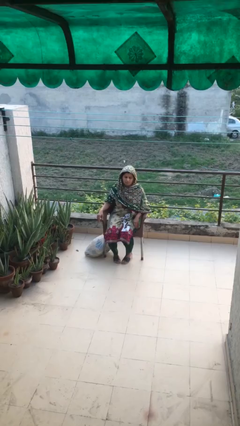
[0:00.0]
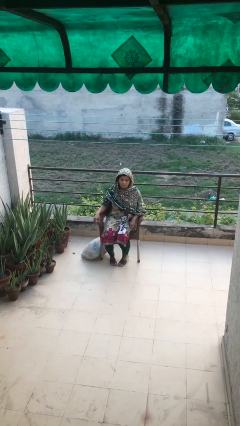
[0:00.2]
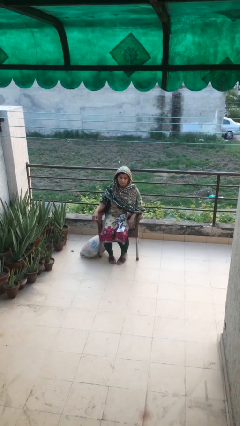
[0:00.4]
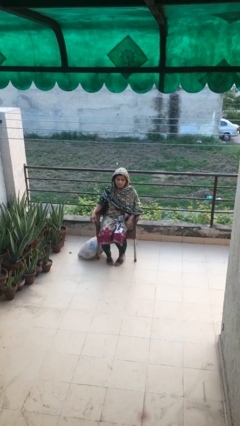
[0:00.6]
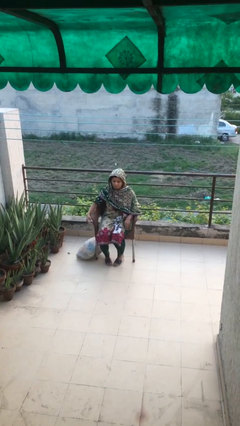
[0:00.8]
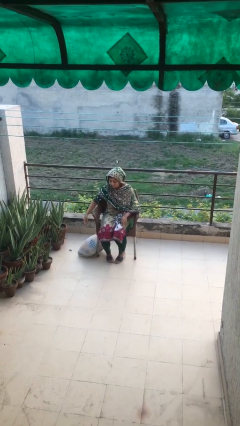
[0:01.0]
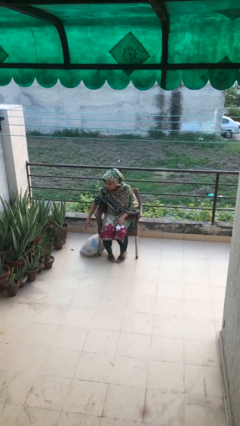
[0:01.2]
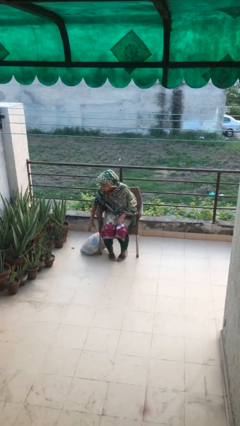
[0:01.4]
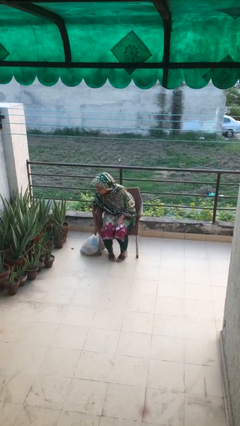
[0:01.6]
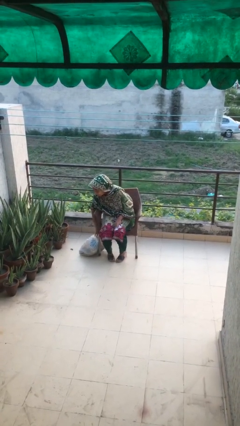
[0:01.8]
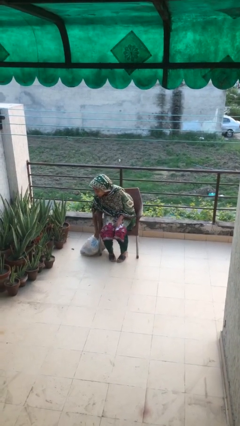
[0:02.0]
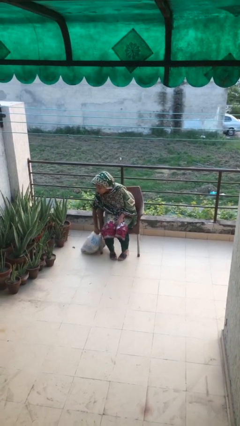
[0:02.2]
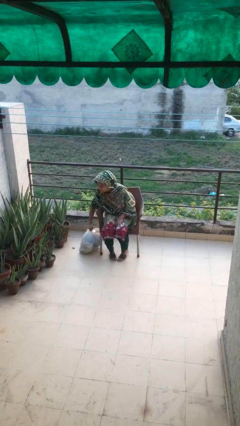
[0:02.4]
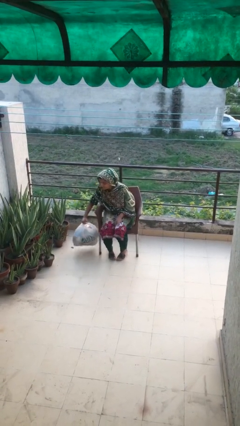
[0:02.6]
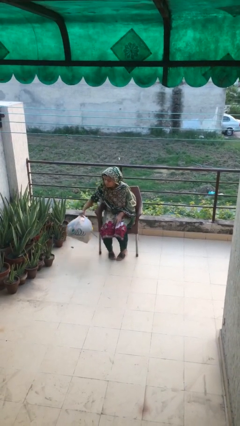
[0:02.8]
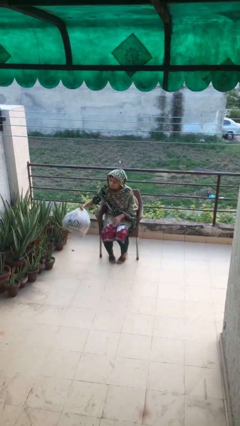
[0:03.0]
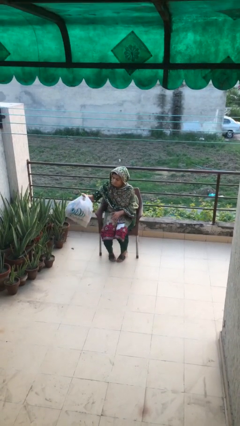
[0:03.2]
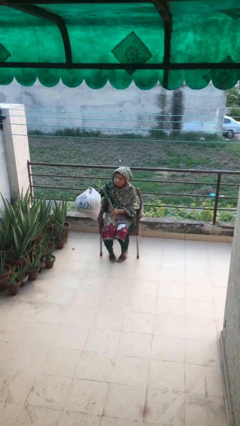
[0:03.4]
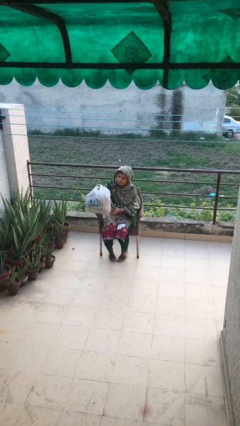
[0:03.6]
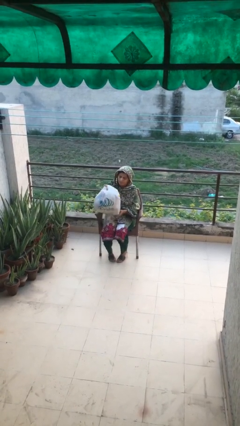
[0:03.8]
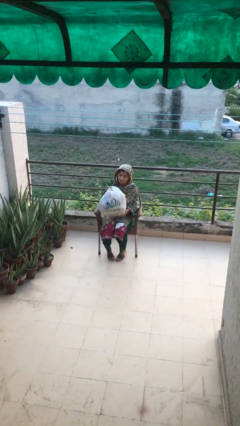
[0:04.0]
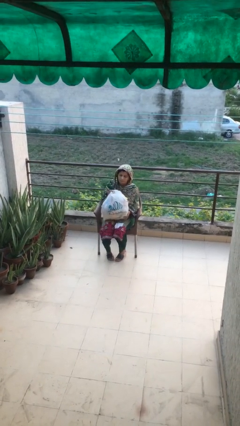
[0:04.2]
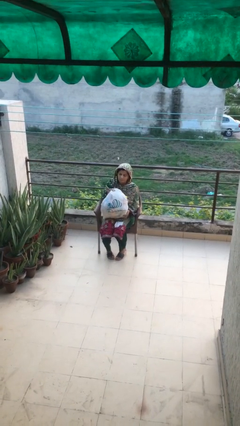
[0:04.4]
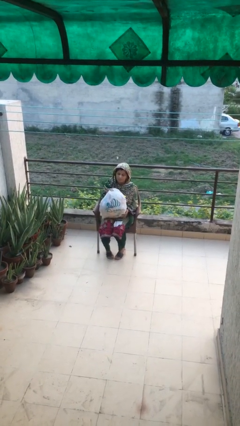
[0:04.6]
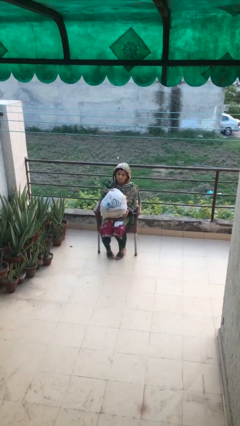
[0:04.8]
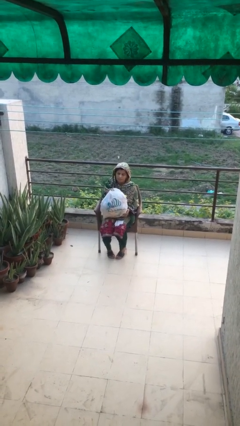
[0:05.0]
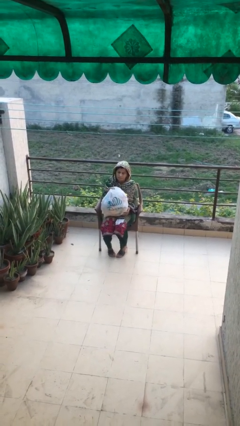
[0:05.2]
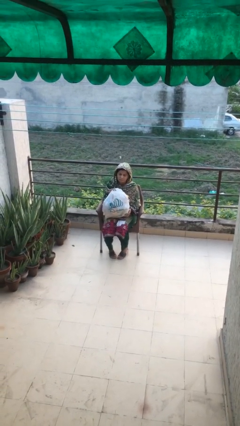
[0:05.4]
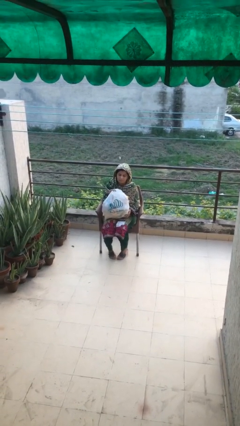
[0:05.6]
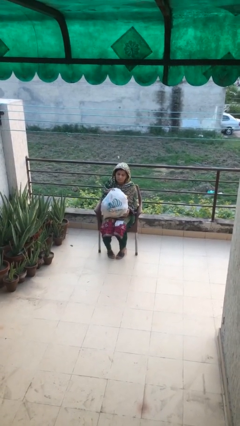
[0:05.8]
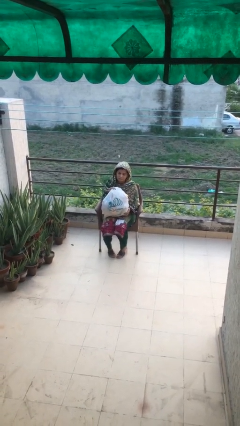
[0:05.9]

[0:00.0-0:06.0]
person picks up object from floor

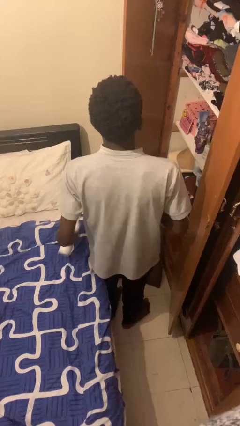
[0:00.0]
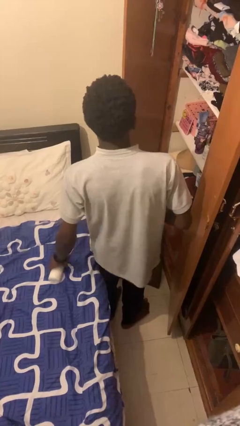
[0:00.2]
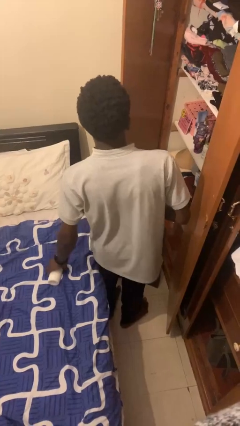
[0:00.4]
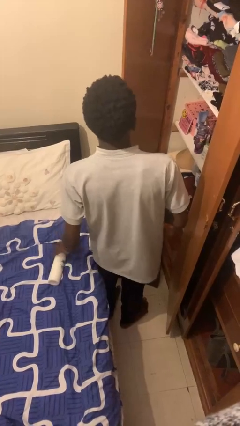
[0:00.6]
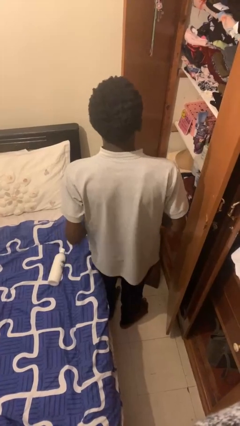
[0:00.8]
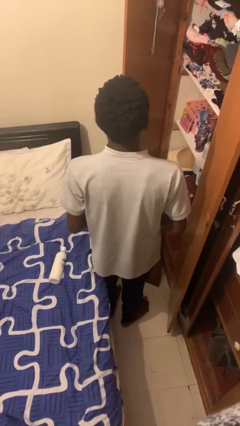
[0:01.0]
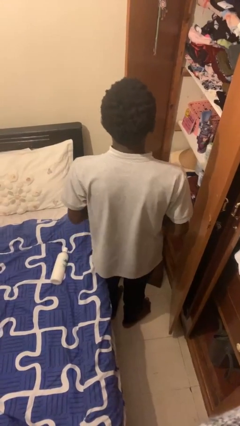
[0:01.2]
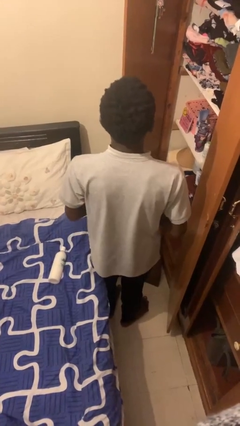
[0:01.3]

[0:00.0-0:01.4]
person puts down object into cabinet

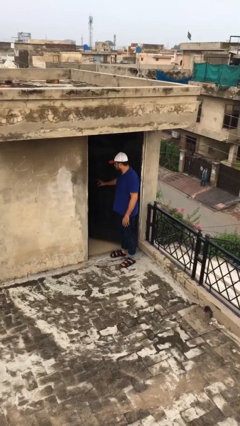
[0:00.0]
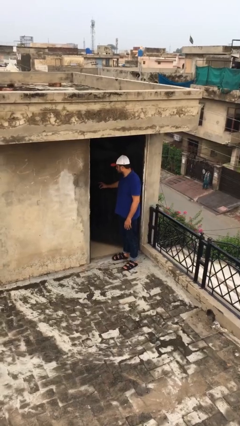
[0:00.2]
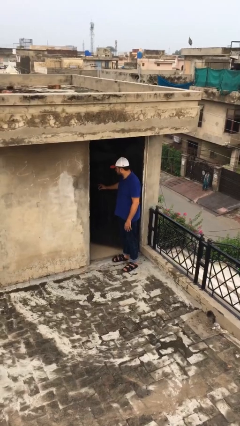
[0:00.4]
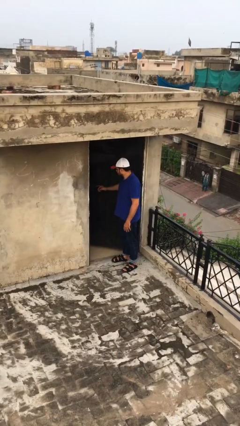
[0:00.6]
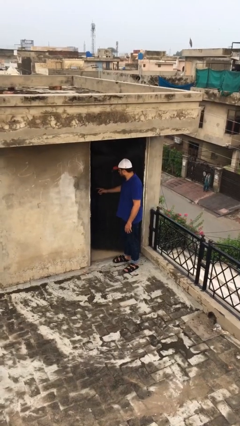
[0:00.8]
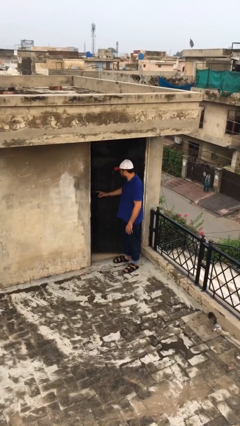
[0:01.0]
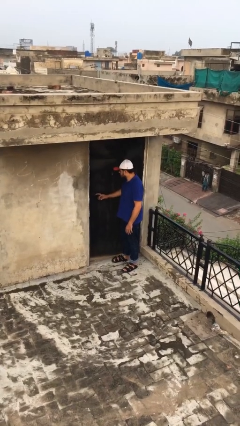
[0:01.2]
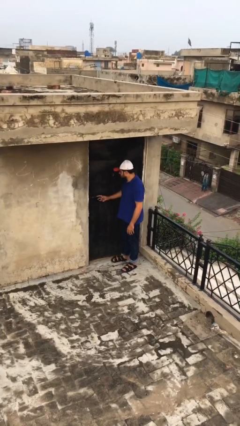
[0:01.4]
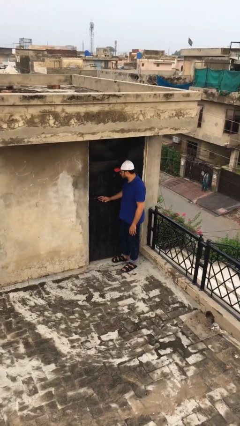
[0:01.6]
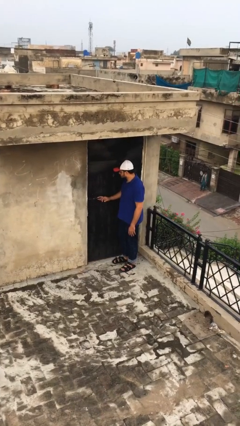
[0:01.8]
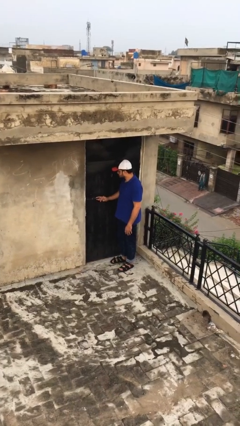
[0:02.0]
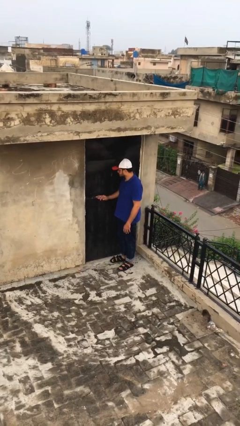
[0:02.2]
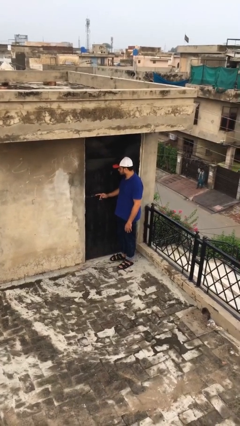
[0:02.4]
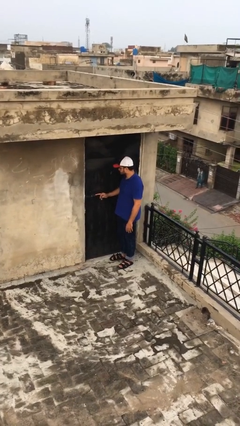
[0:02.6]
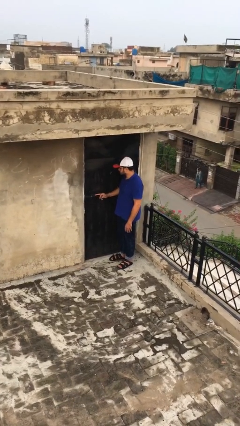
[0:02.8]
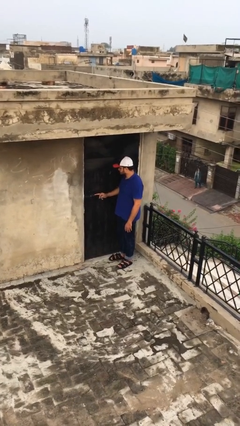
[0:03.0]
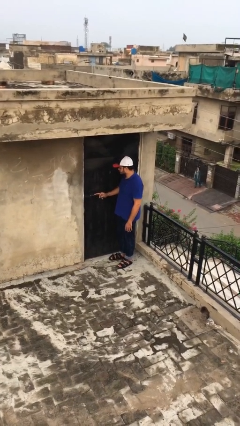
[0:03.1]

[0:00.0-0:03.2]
person closes facility door

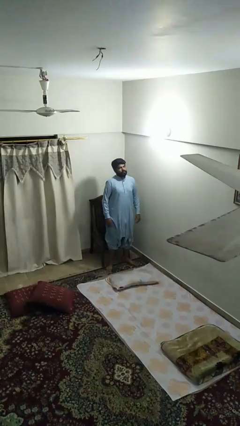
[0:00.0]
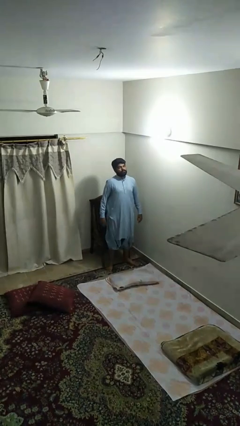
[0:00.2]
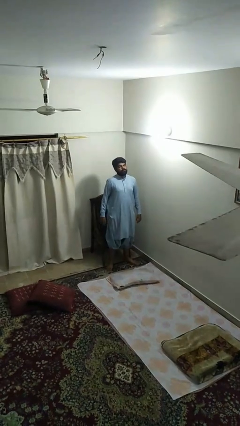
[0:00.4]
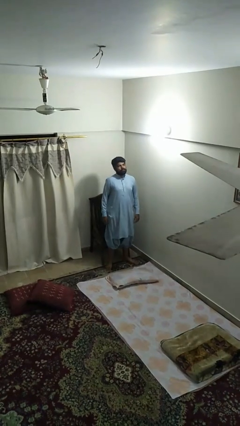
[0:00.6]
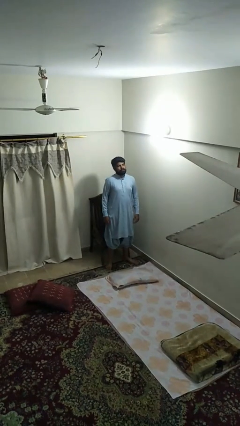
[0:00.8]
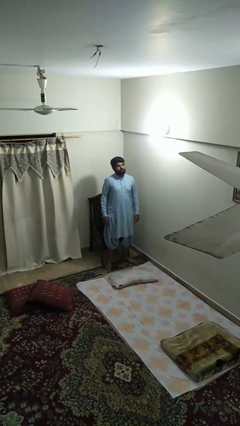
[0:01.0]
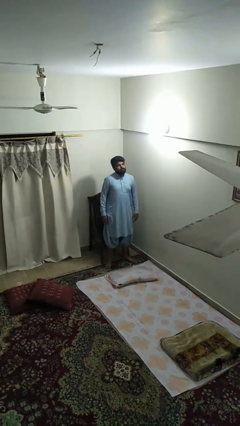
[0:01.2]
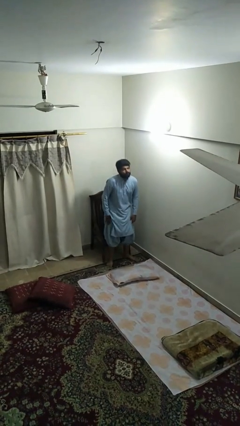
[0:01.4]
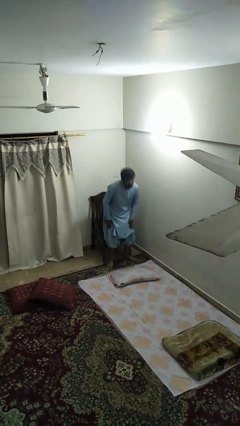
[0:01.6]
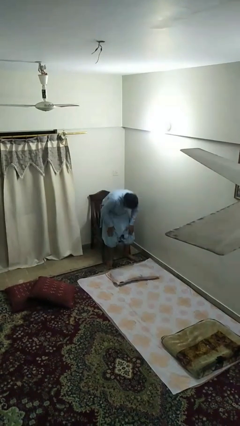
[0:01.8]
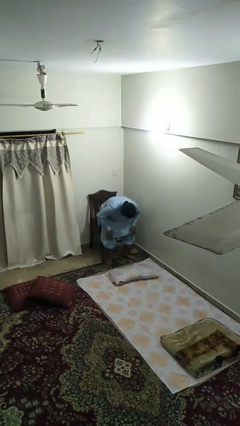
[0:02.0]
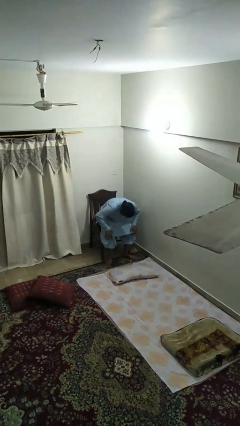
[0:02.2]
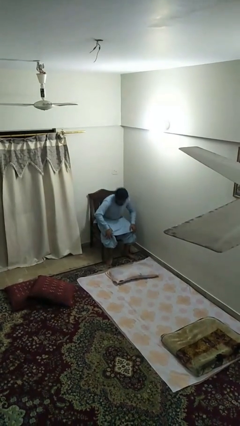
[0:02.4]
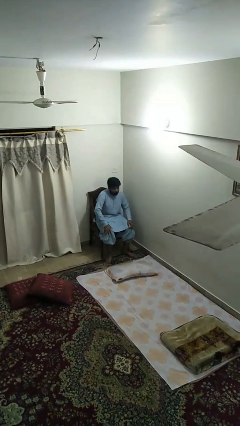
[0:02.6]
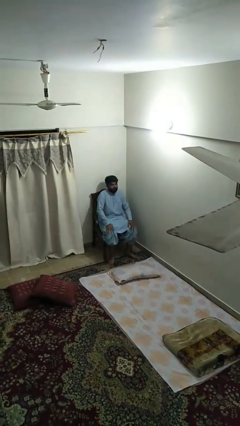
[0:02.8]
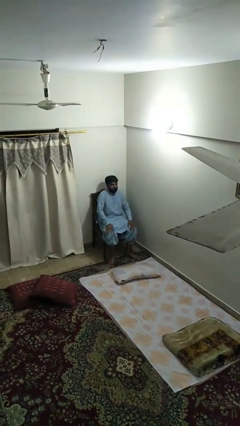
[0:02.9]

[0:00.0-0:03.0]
person sits down

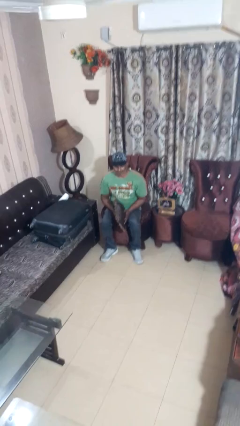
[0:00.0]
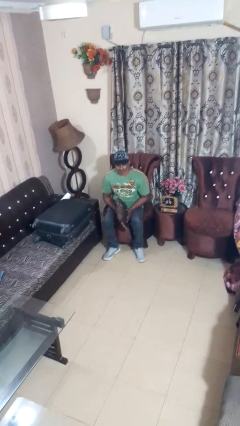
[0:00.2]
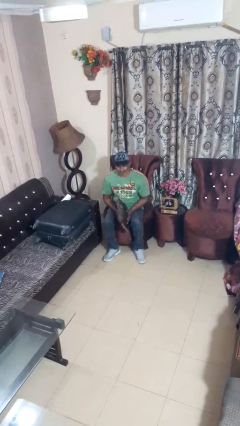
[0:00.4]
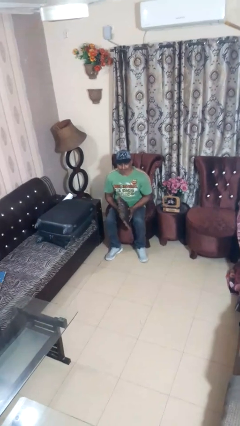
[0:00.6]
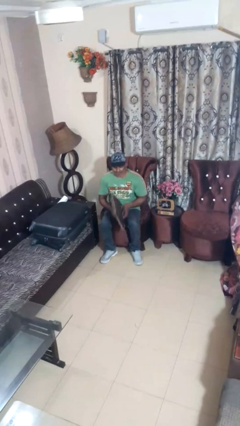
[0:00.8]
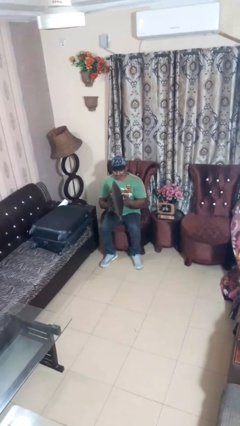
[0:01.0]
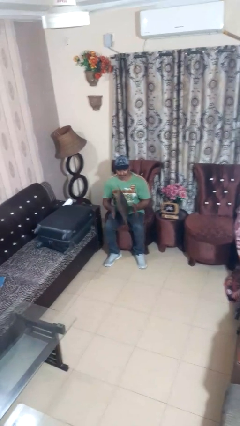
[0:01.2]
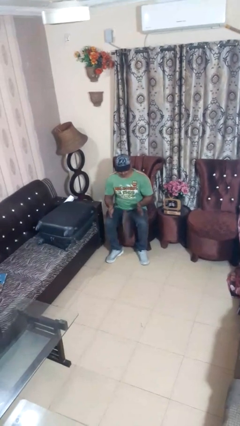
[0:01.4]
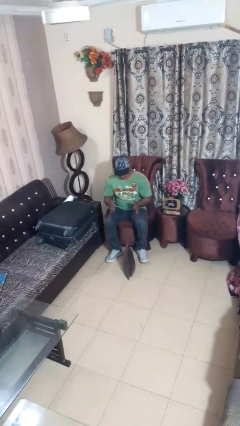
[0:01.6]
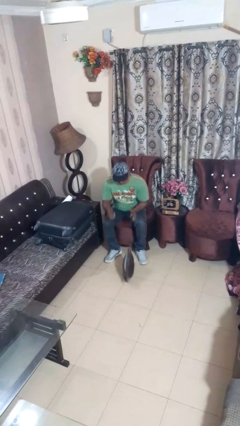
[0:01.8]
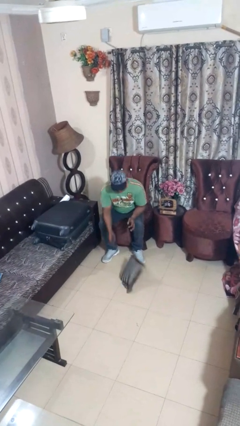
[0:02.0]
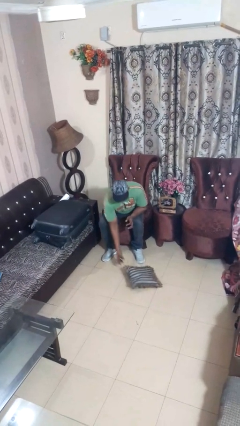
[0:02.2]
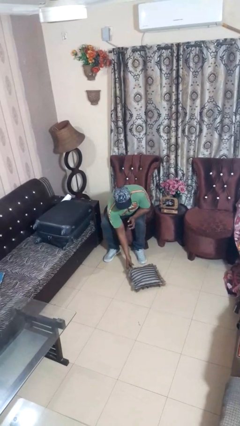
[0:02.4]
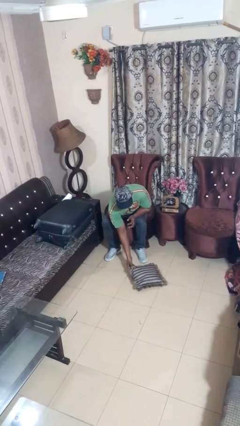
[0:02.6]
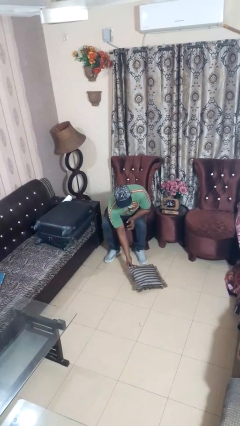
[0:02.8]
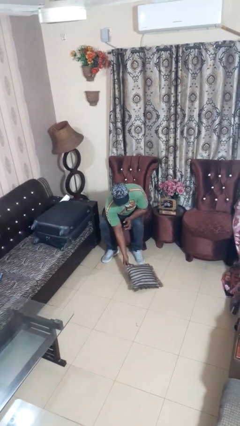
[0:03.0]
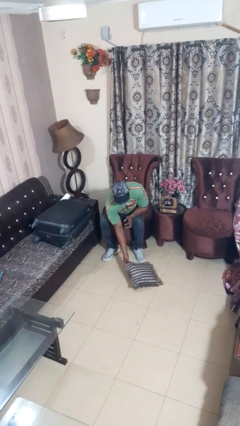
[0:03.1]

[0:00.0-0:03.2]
person drops object

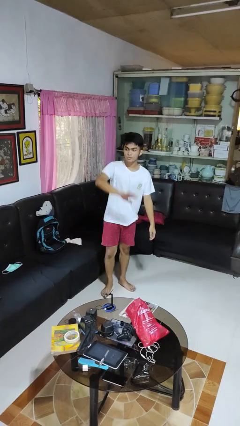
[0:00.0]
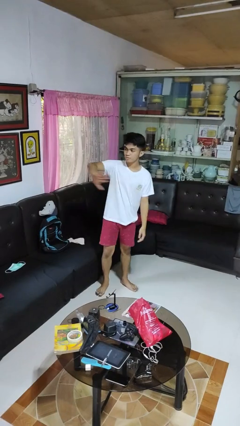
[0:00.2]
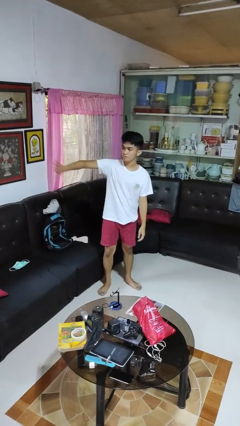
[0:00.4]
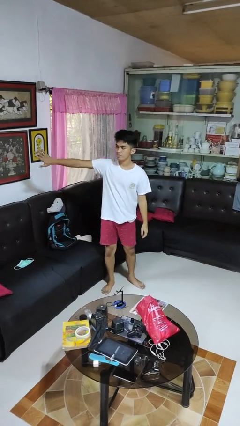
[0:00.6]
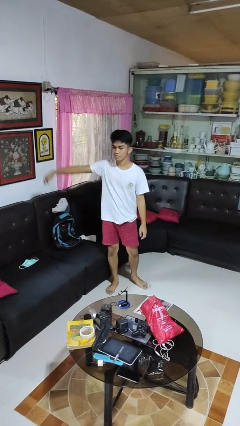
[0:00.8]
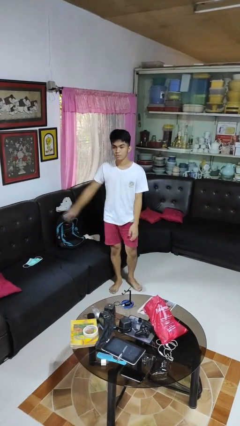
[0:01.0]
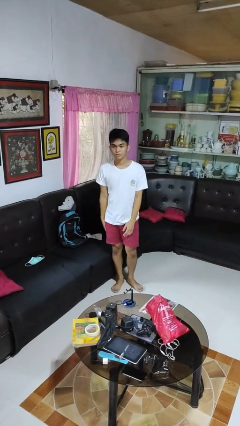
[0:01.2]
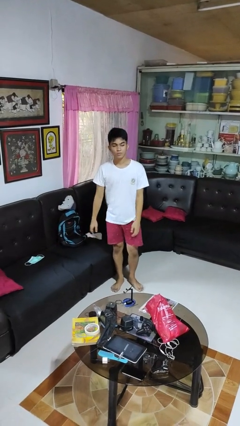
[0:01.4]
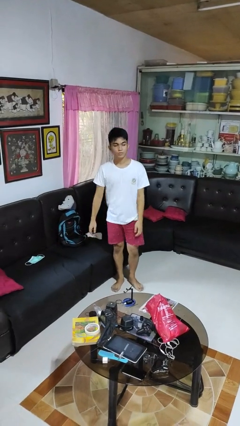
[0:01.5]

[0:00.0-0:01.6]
person gestures swipe right
